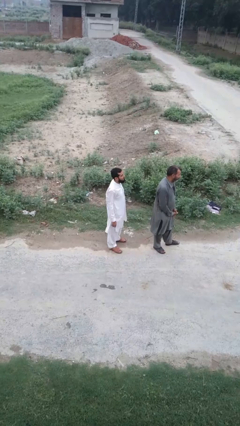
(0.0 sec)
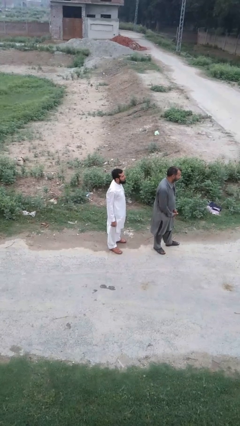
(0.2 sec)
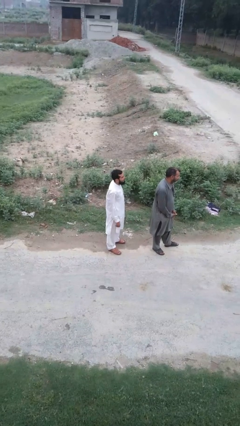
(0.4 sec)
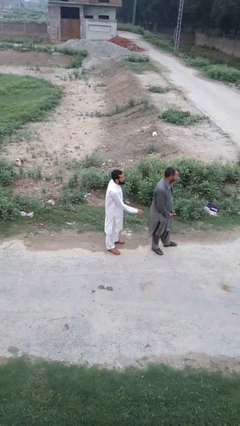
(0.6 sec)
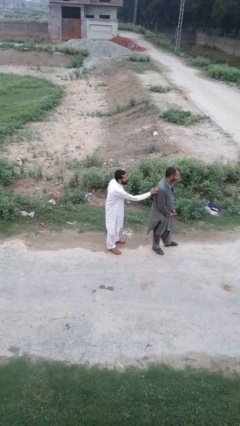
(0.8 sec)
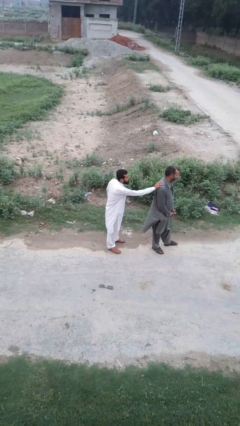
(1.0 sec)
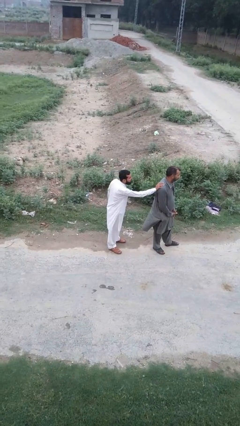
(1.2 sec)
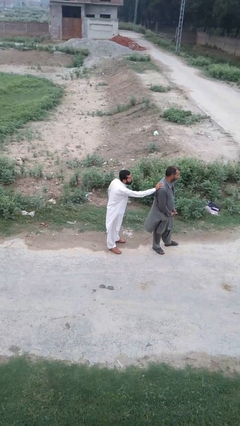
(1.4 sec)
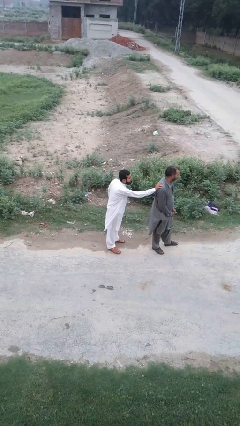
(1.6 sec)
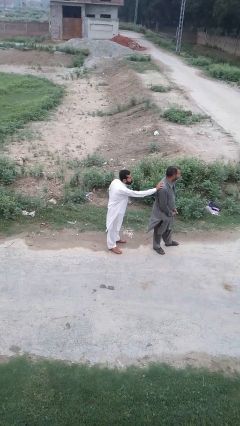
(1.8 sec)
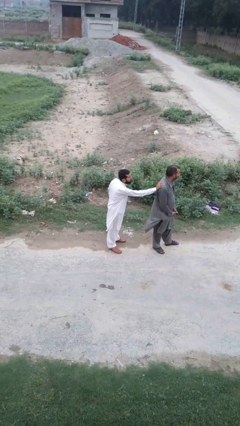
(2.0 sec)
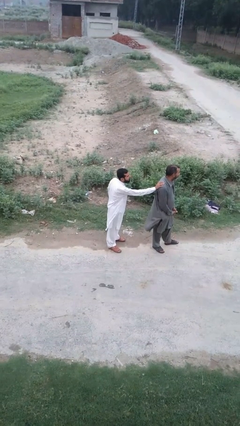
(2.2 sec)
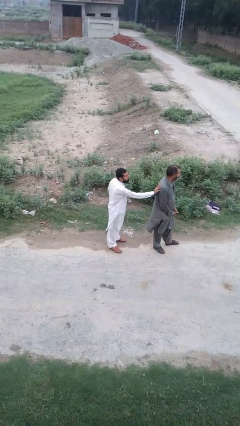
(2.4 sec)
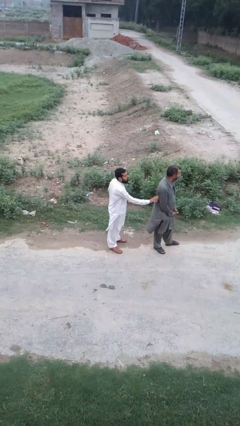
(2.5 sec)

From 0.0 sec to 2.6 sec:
person touches back of person

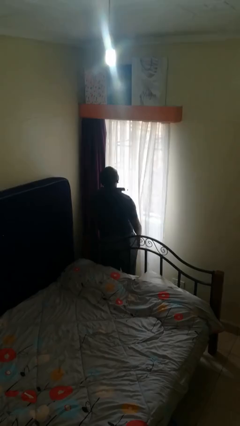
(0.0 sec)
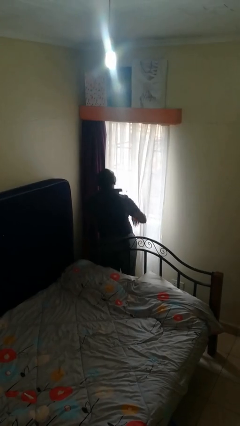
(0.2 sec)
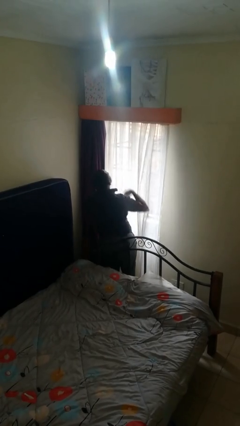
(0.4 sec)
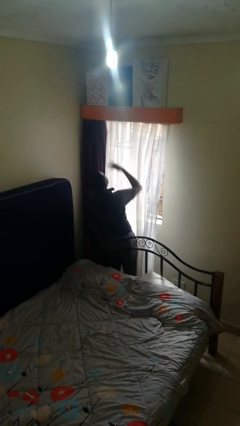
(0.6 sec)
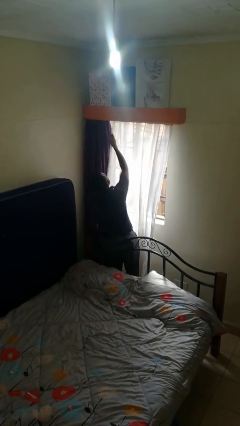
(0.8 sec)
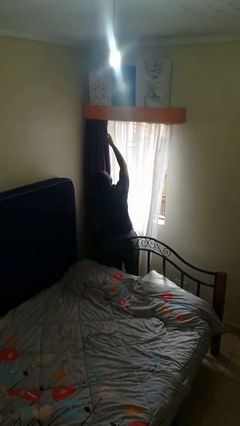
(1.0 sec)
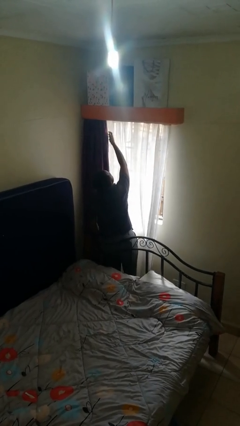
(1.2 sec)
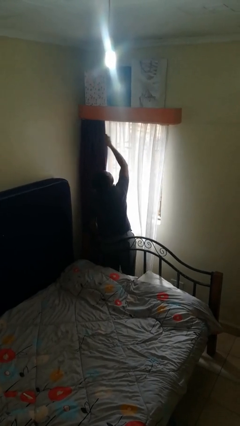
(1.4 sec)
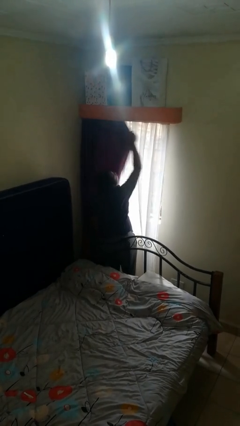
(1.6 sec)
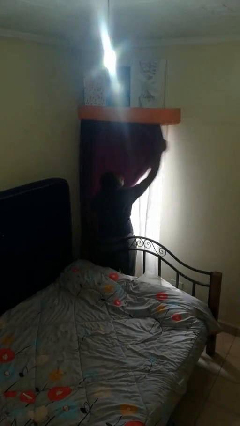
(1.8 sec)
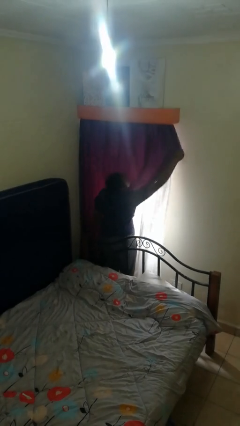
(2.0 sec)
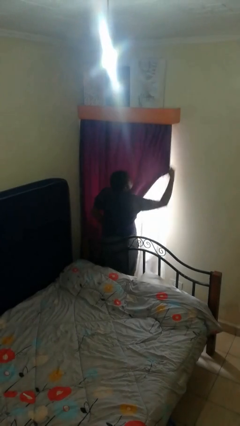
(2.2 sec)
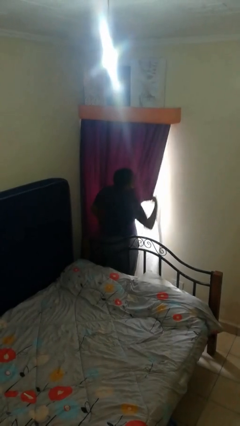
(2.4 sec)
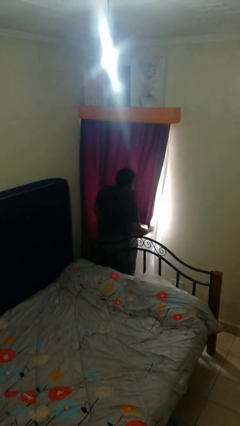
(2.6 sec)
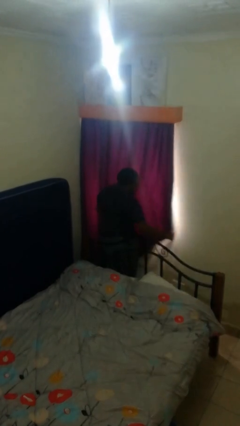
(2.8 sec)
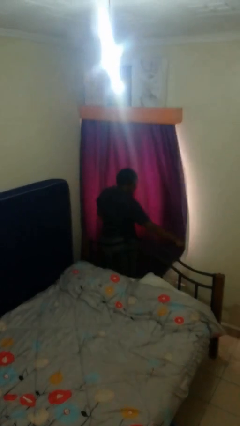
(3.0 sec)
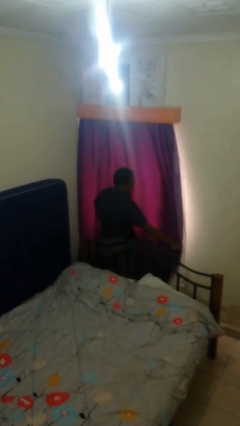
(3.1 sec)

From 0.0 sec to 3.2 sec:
person closes curtains

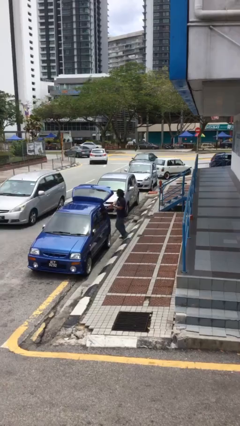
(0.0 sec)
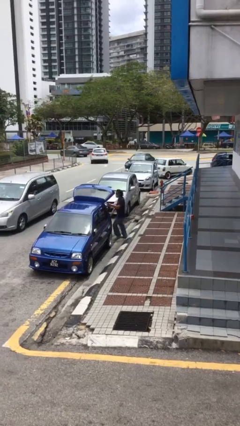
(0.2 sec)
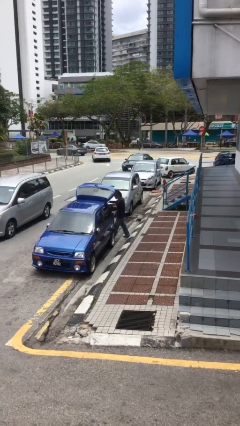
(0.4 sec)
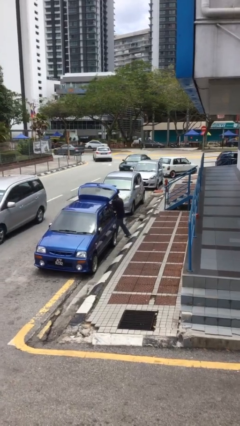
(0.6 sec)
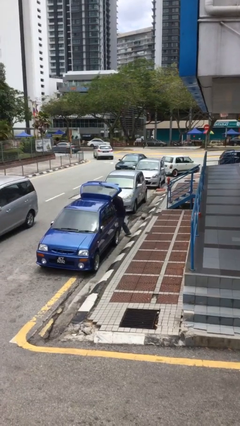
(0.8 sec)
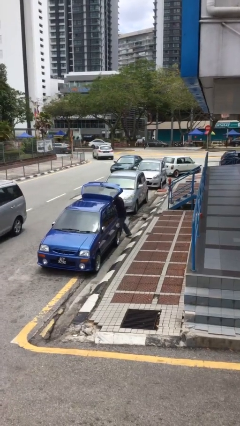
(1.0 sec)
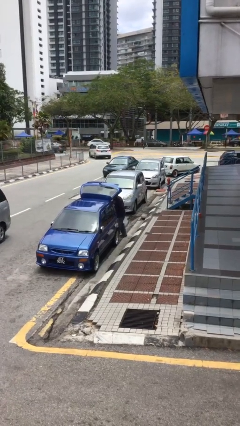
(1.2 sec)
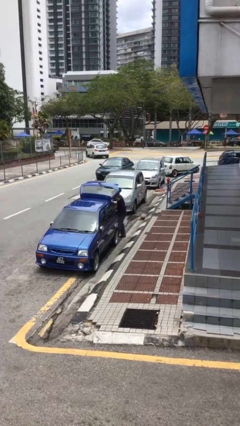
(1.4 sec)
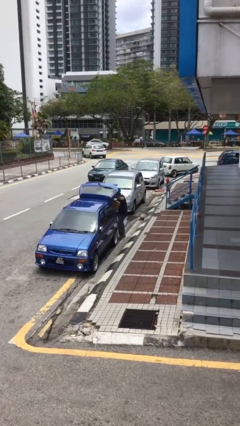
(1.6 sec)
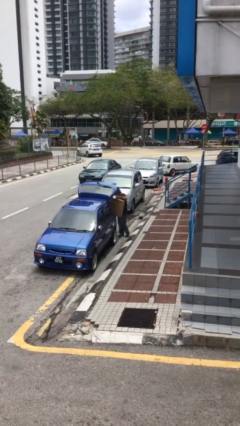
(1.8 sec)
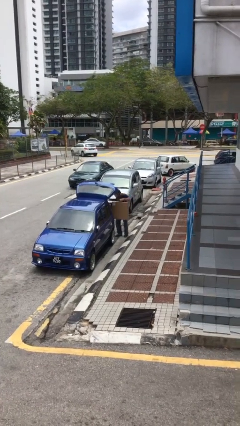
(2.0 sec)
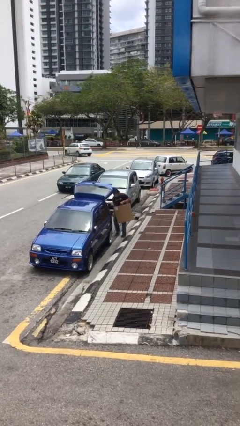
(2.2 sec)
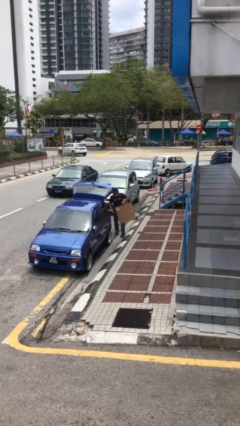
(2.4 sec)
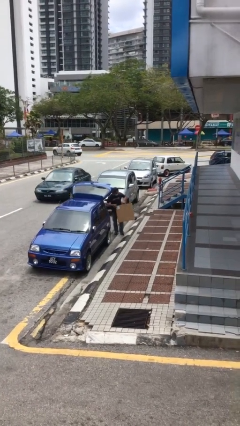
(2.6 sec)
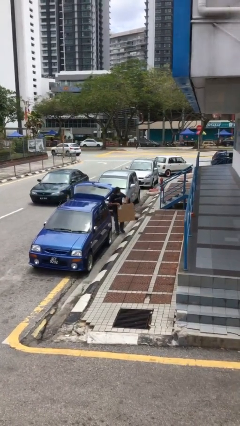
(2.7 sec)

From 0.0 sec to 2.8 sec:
person unloads car

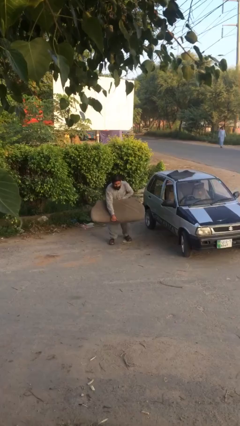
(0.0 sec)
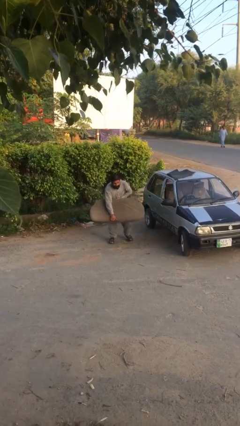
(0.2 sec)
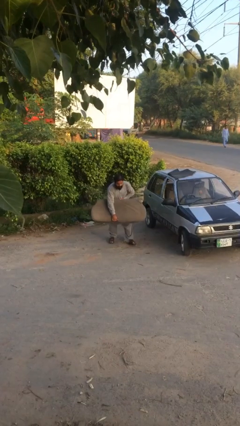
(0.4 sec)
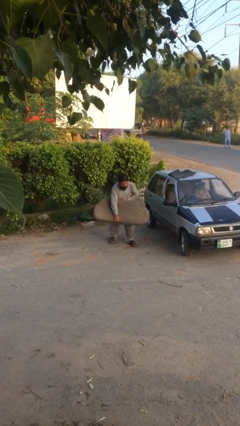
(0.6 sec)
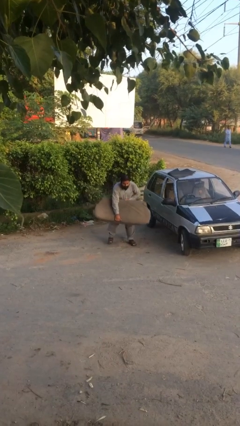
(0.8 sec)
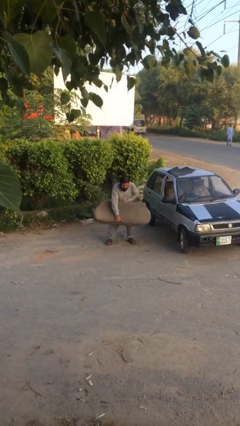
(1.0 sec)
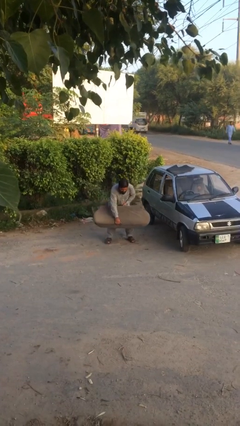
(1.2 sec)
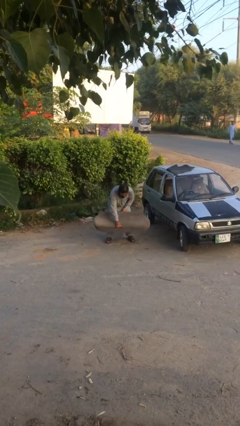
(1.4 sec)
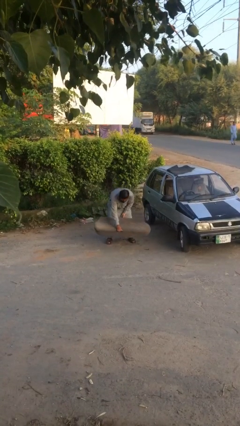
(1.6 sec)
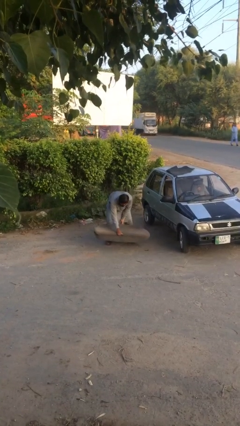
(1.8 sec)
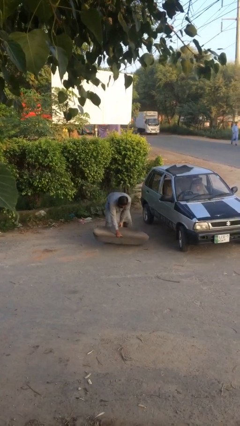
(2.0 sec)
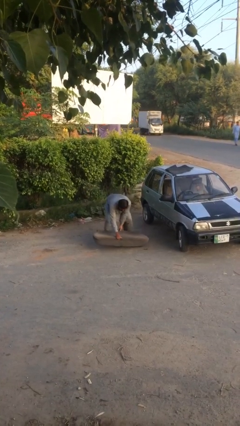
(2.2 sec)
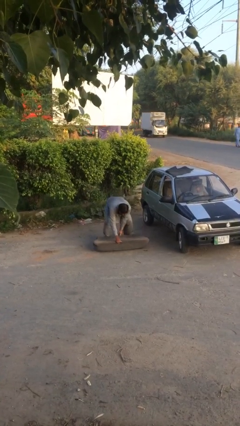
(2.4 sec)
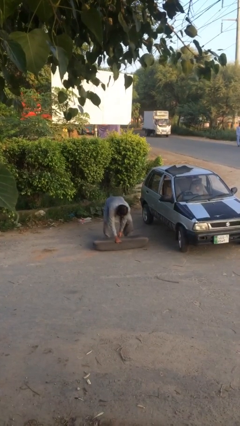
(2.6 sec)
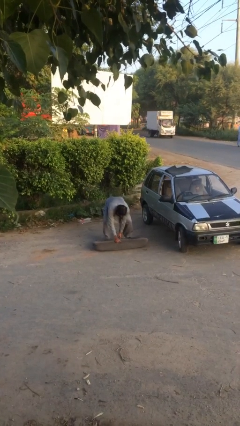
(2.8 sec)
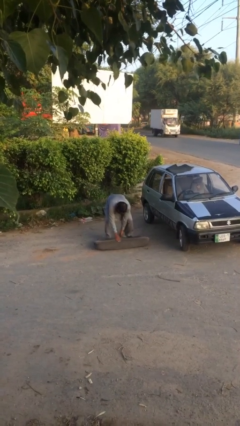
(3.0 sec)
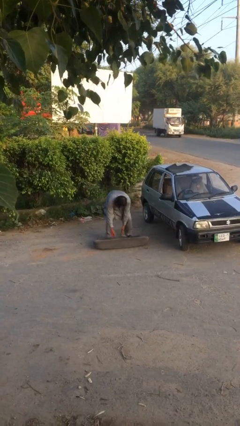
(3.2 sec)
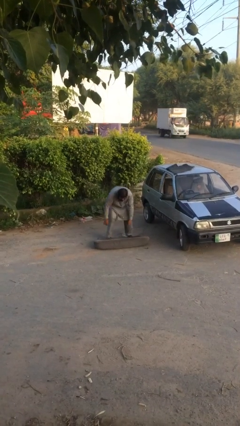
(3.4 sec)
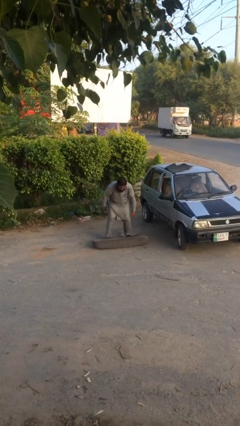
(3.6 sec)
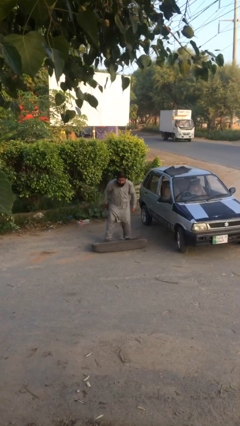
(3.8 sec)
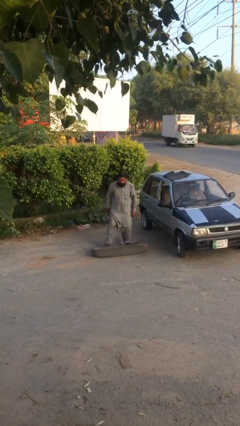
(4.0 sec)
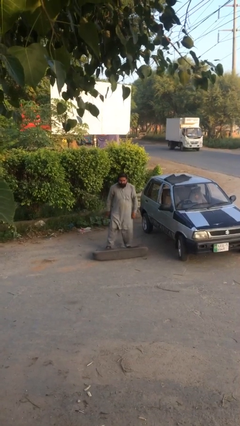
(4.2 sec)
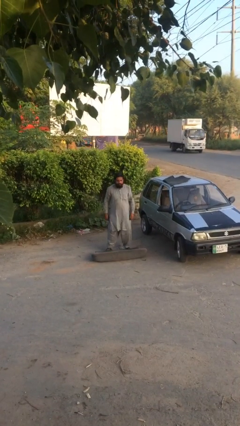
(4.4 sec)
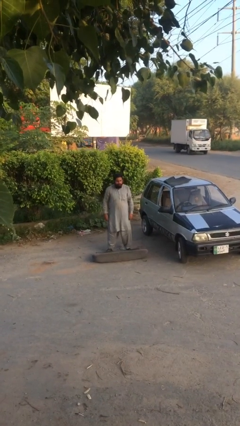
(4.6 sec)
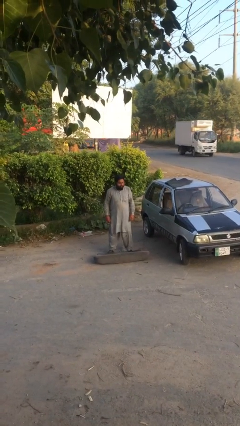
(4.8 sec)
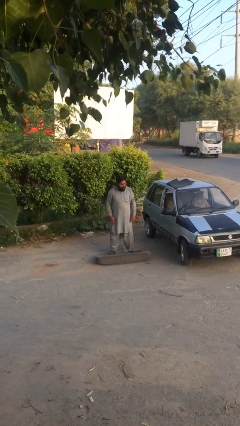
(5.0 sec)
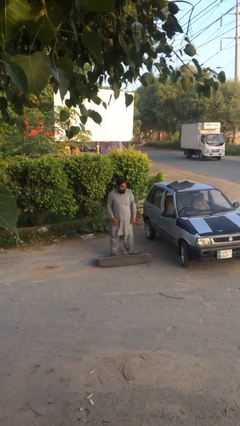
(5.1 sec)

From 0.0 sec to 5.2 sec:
person puts down object on floor

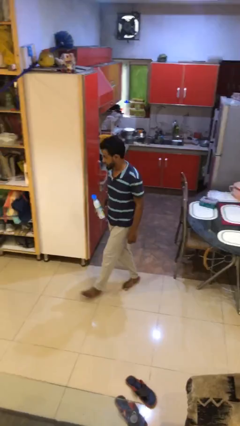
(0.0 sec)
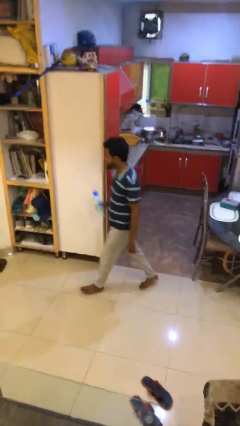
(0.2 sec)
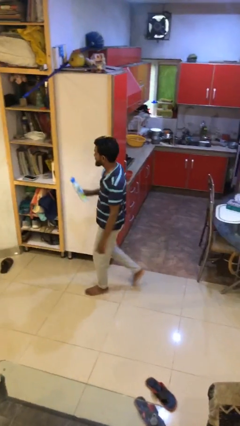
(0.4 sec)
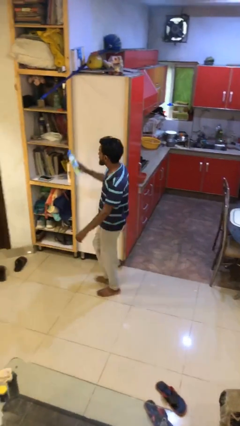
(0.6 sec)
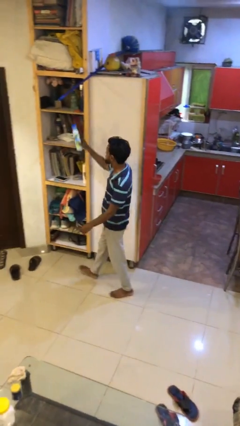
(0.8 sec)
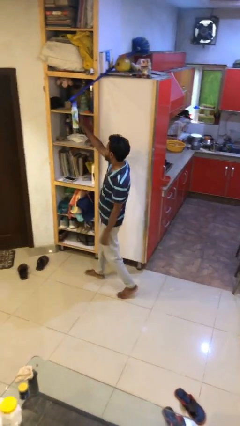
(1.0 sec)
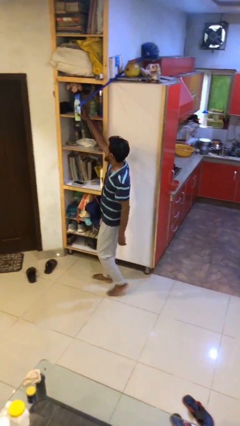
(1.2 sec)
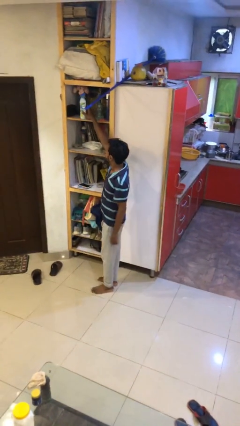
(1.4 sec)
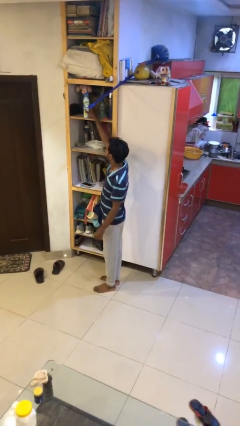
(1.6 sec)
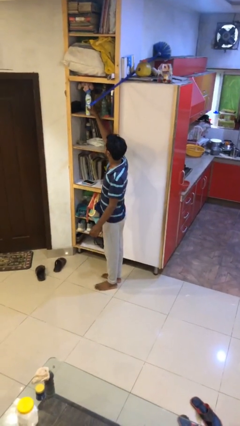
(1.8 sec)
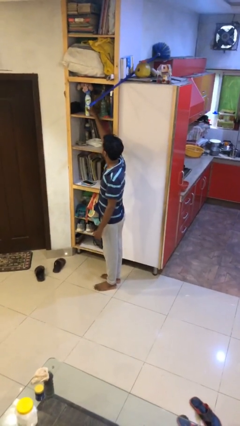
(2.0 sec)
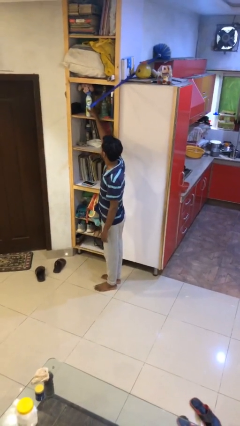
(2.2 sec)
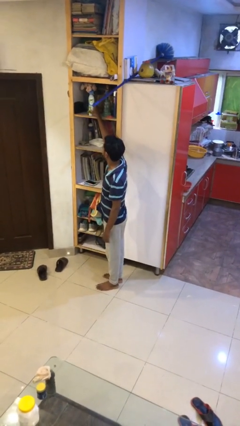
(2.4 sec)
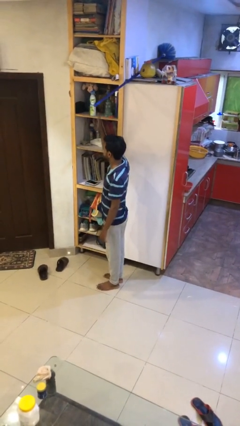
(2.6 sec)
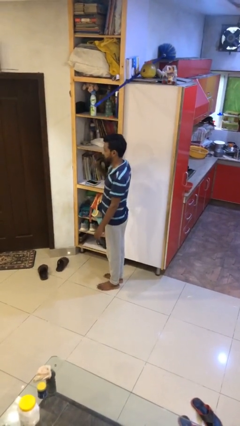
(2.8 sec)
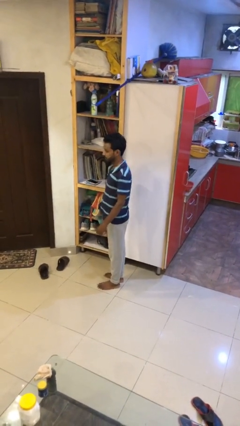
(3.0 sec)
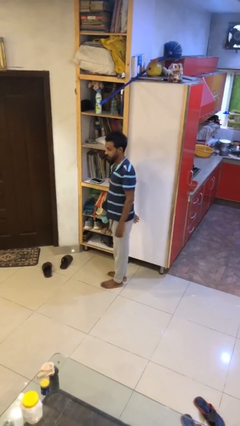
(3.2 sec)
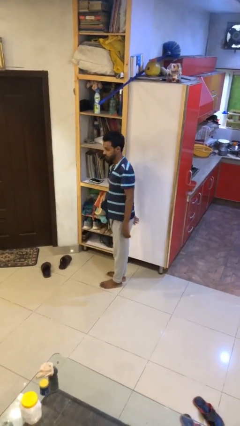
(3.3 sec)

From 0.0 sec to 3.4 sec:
person puts down object on shelf
